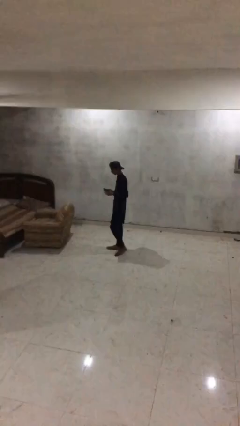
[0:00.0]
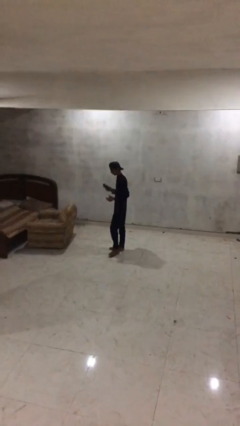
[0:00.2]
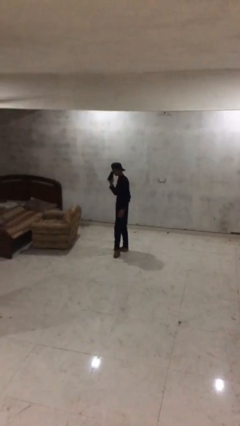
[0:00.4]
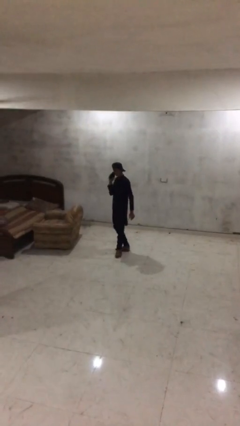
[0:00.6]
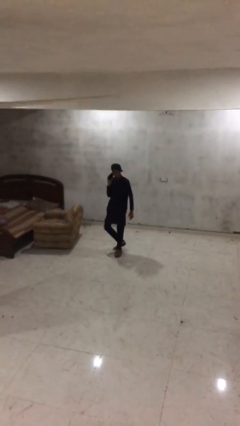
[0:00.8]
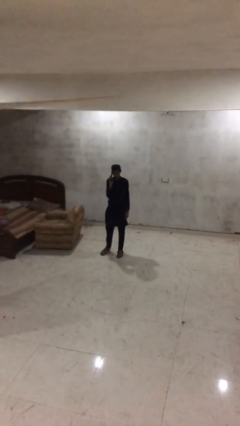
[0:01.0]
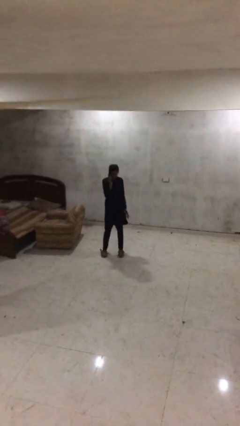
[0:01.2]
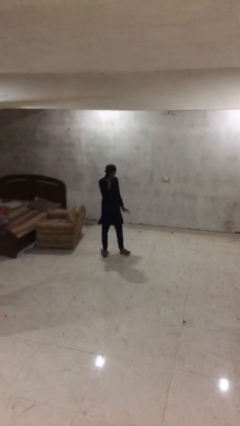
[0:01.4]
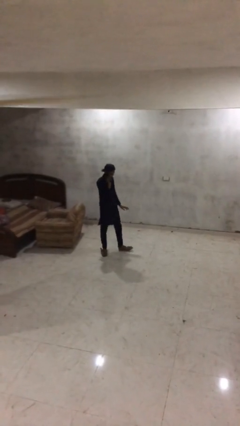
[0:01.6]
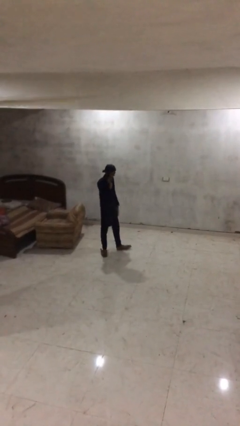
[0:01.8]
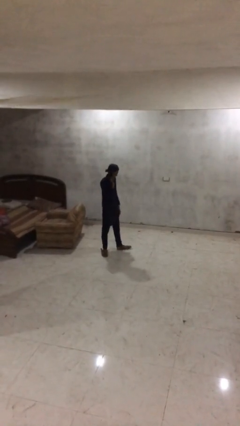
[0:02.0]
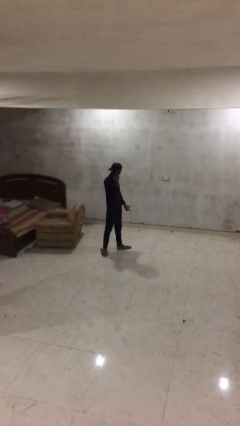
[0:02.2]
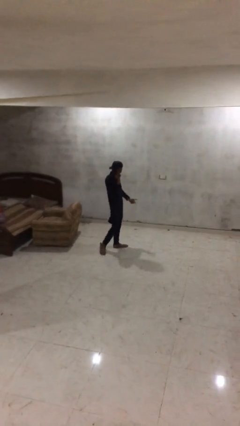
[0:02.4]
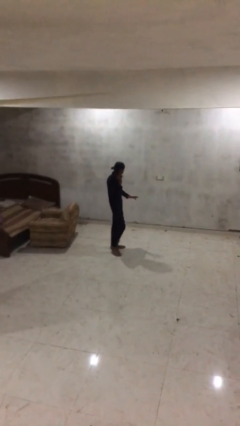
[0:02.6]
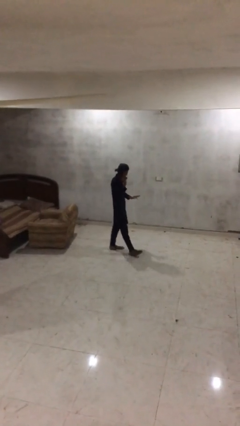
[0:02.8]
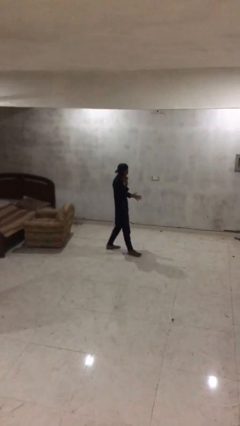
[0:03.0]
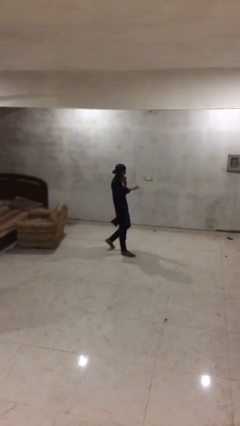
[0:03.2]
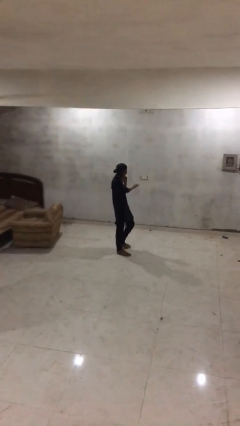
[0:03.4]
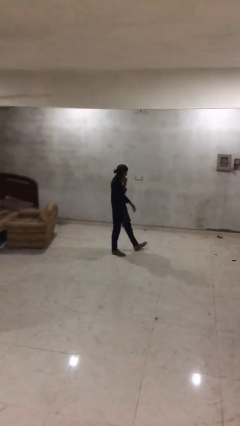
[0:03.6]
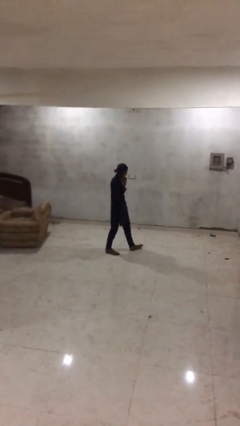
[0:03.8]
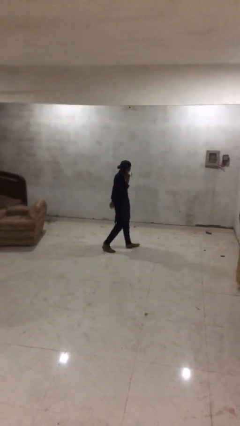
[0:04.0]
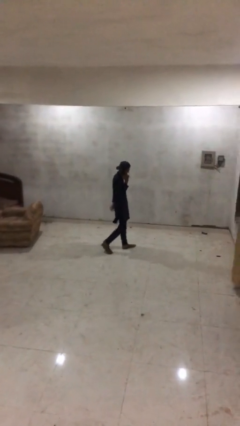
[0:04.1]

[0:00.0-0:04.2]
person talks on phone

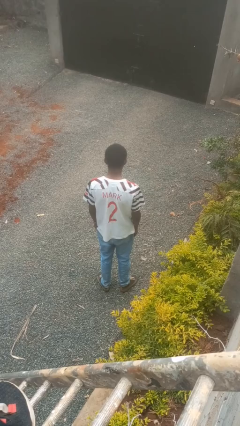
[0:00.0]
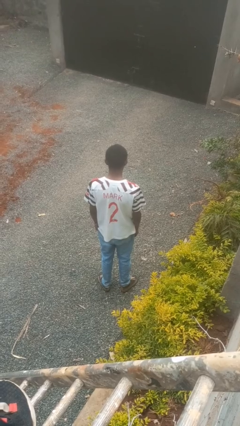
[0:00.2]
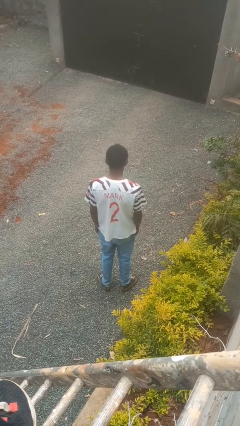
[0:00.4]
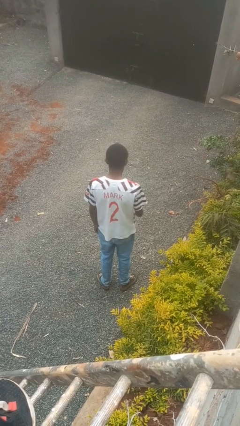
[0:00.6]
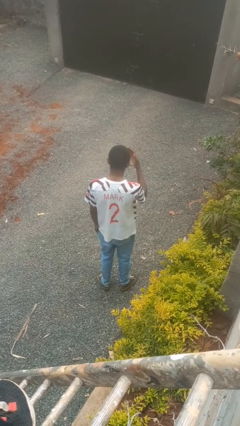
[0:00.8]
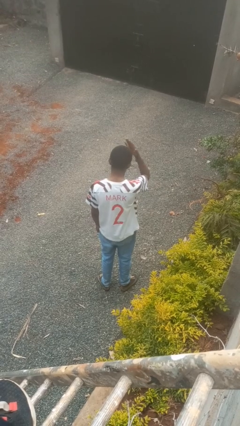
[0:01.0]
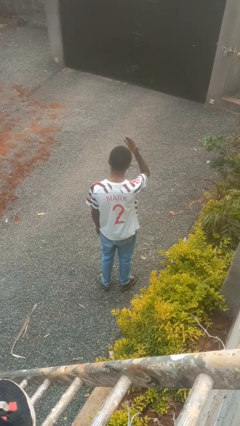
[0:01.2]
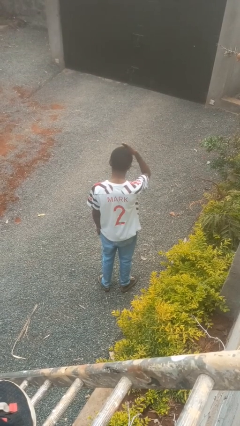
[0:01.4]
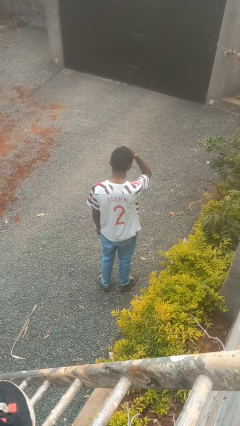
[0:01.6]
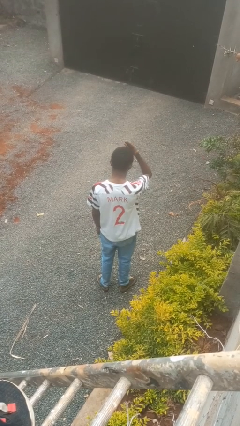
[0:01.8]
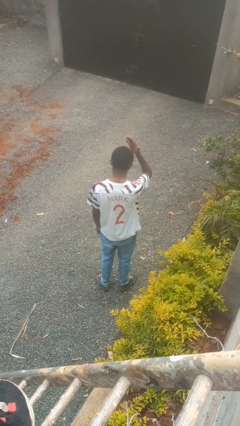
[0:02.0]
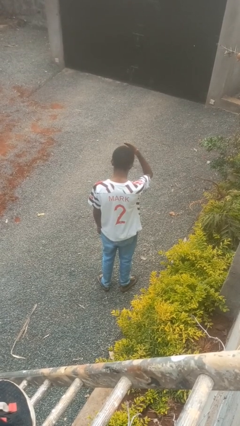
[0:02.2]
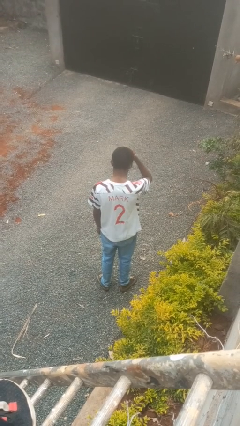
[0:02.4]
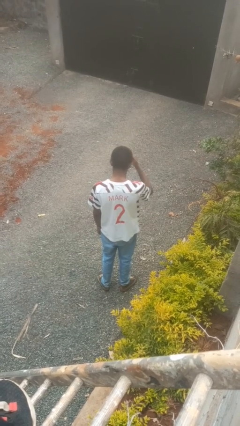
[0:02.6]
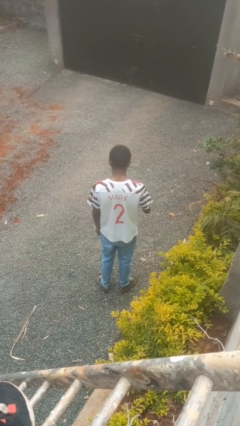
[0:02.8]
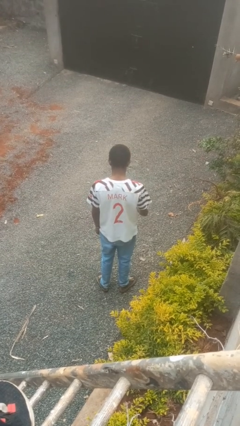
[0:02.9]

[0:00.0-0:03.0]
person pats head

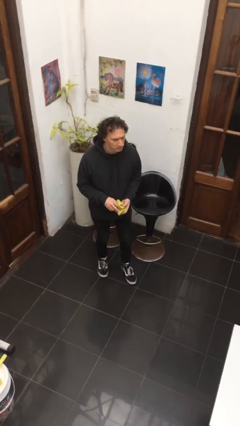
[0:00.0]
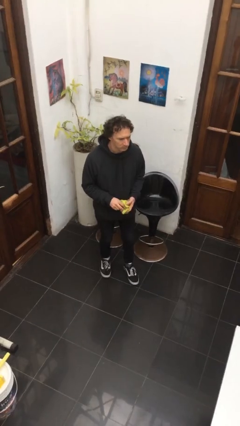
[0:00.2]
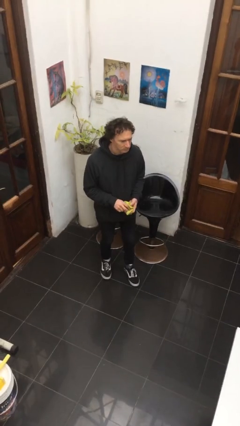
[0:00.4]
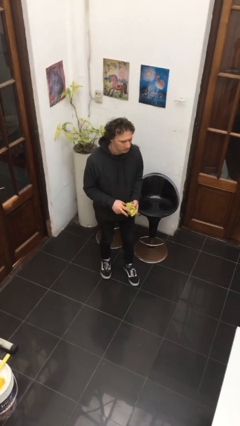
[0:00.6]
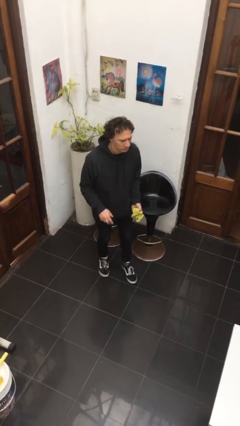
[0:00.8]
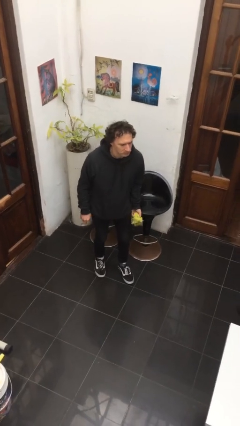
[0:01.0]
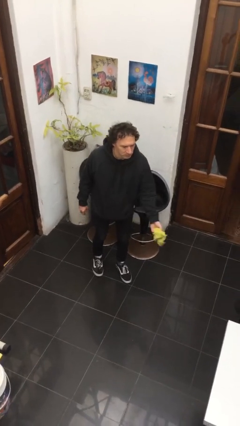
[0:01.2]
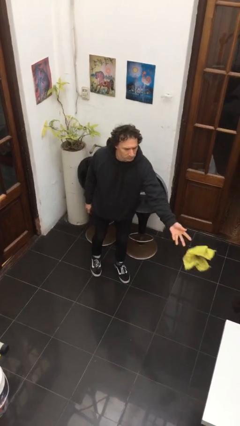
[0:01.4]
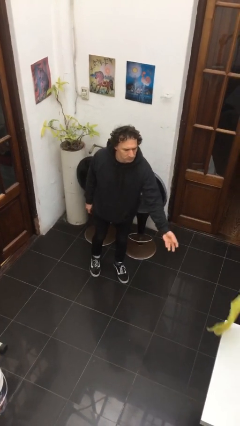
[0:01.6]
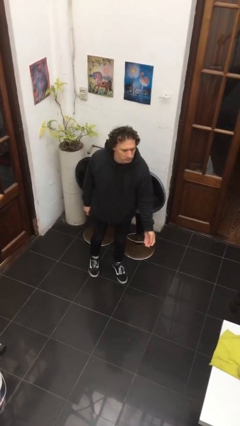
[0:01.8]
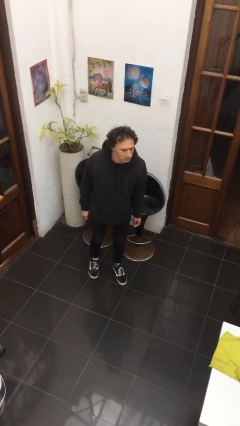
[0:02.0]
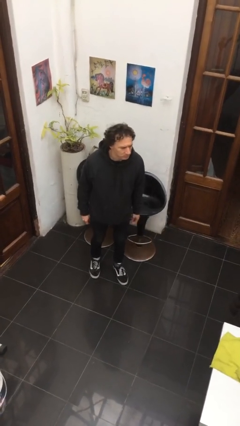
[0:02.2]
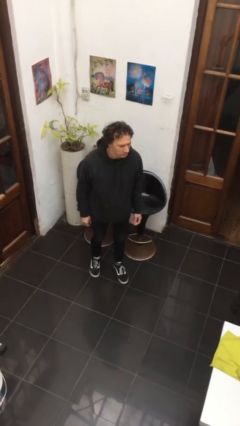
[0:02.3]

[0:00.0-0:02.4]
person throws object on table

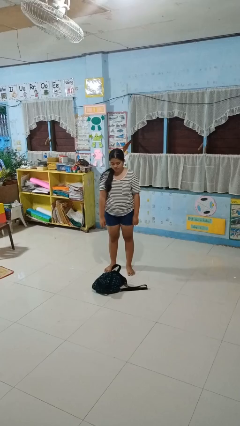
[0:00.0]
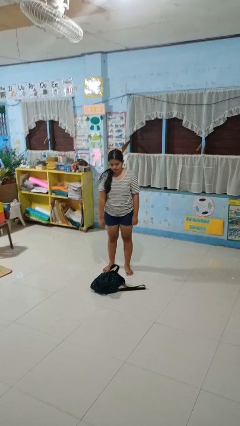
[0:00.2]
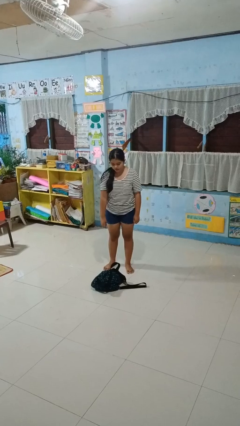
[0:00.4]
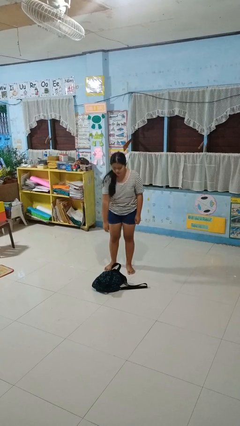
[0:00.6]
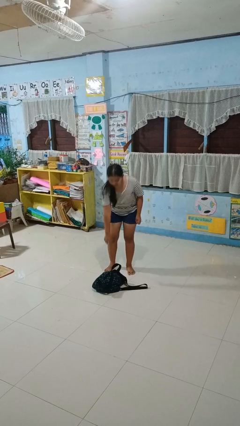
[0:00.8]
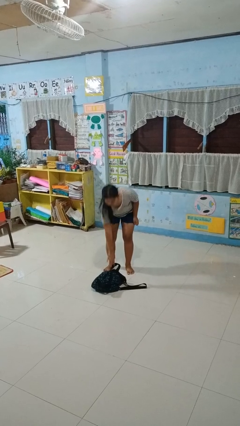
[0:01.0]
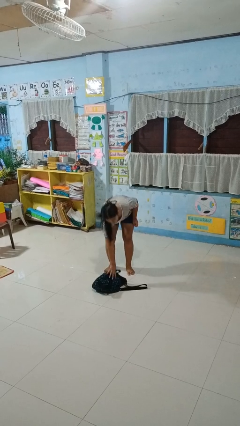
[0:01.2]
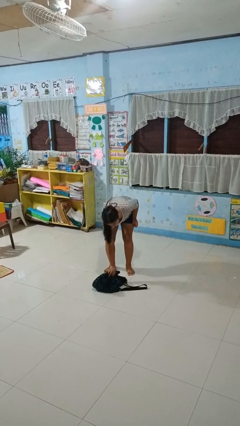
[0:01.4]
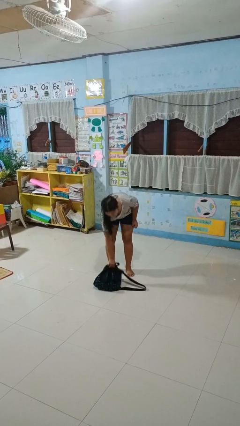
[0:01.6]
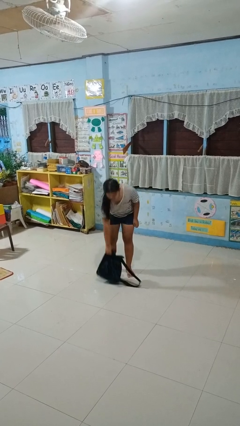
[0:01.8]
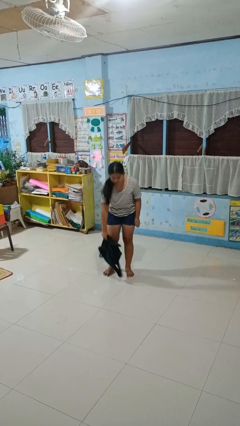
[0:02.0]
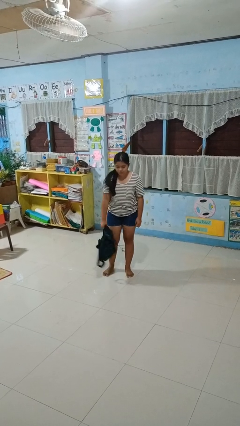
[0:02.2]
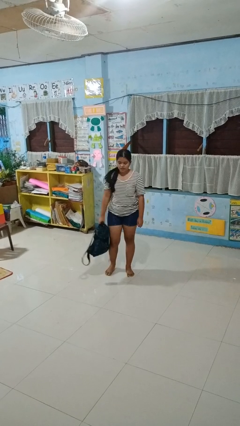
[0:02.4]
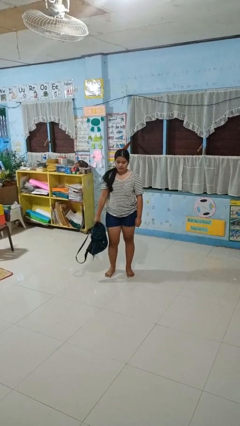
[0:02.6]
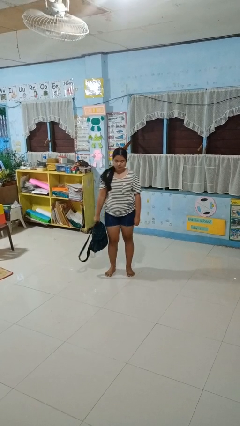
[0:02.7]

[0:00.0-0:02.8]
person picks up object from floor

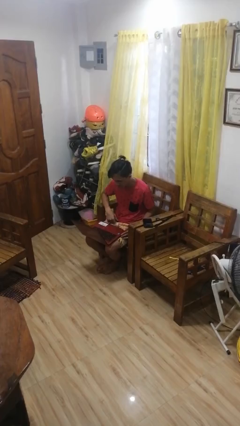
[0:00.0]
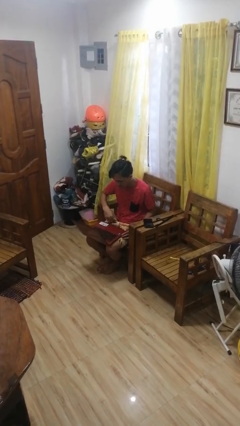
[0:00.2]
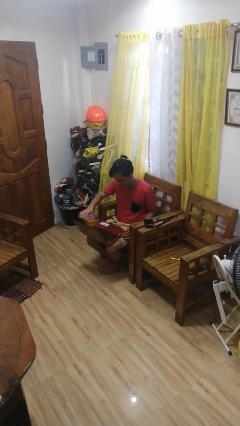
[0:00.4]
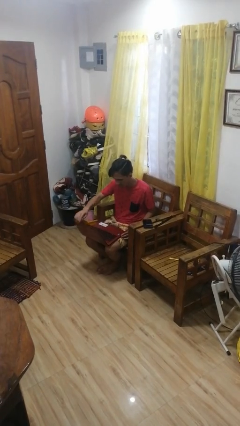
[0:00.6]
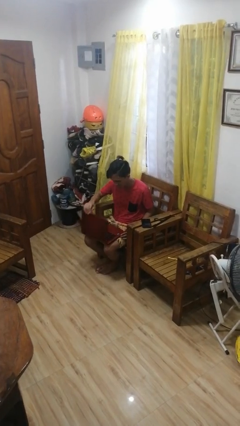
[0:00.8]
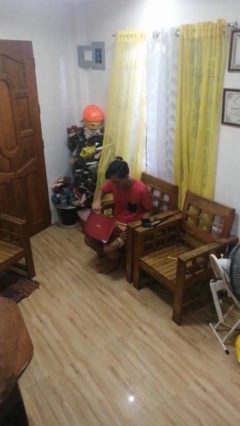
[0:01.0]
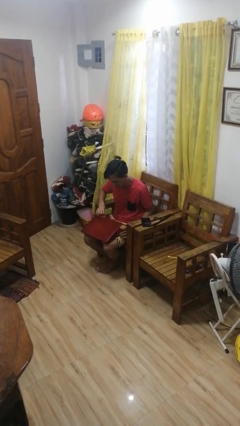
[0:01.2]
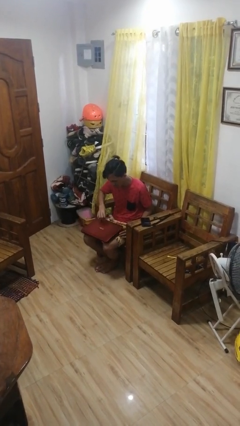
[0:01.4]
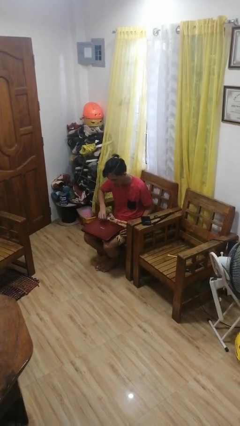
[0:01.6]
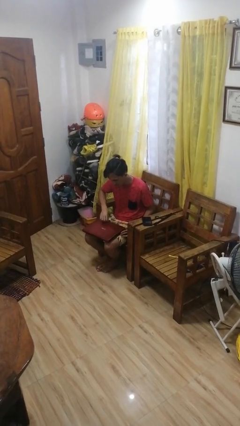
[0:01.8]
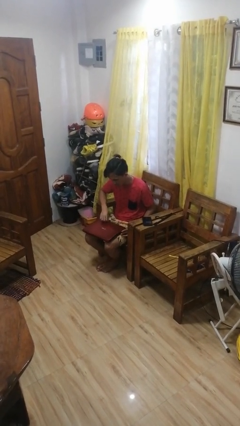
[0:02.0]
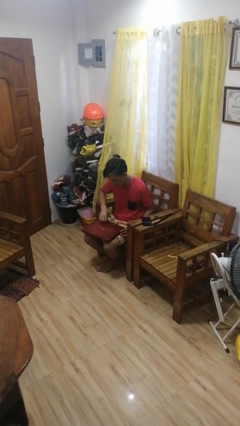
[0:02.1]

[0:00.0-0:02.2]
person closes laptop

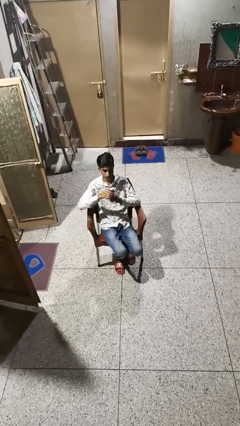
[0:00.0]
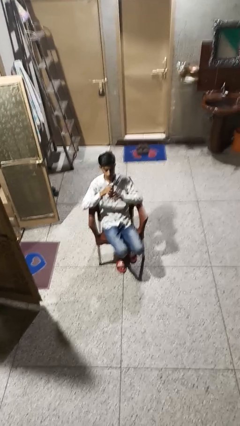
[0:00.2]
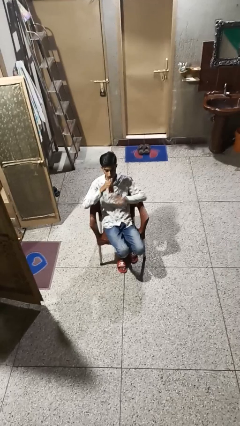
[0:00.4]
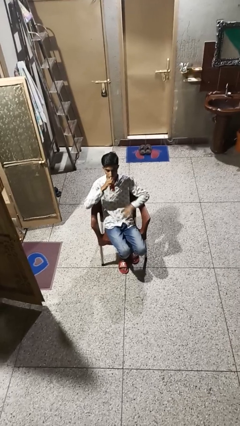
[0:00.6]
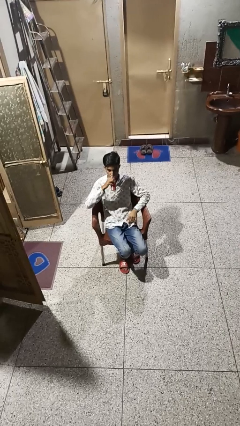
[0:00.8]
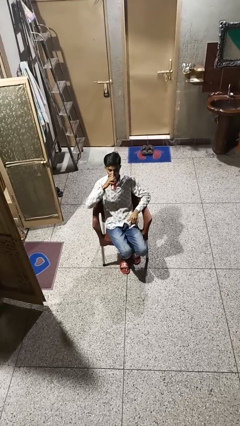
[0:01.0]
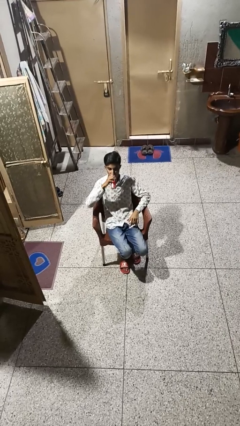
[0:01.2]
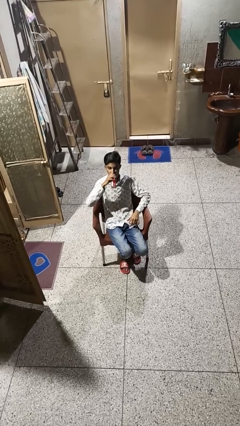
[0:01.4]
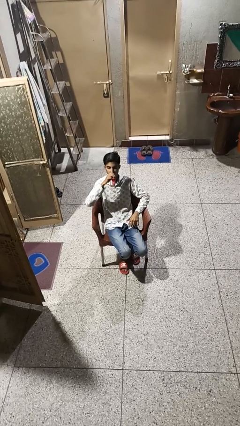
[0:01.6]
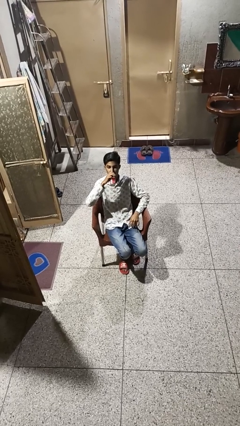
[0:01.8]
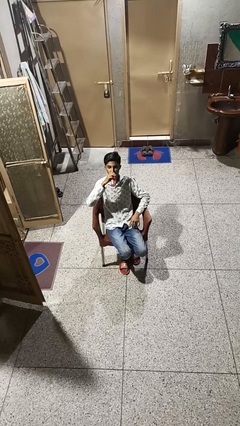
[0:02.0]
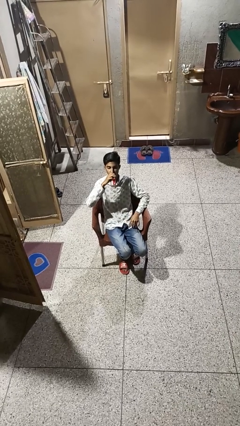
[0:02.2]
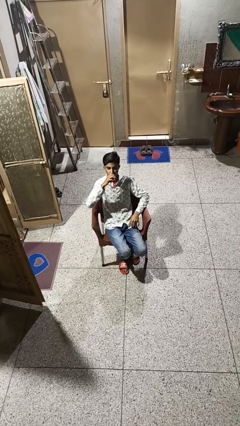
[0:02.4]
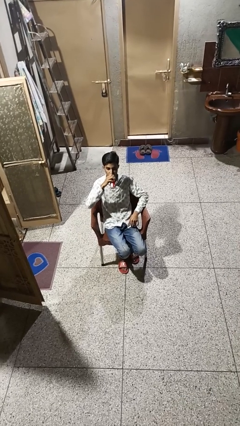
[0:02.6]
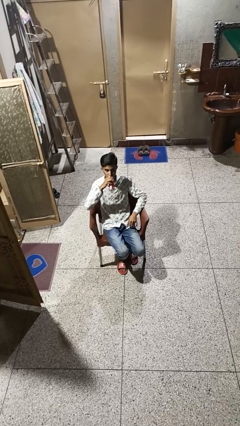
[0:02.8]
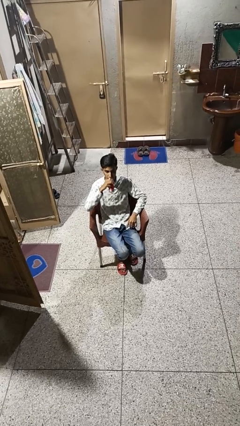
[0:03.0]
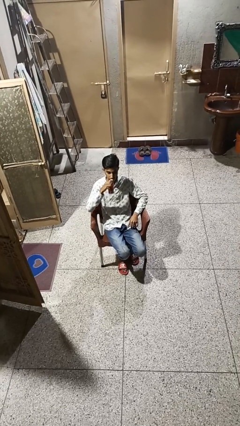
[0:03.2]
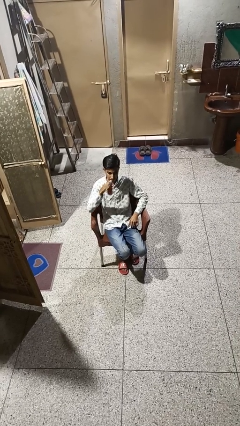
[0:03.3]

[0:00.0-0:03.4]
person drinks from beverage can
